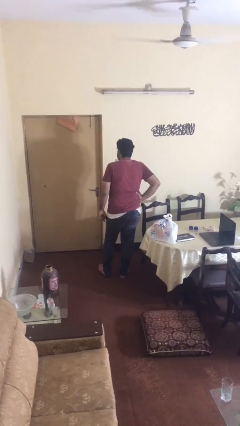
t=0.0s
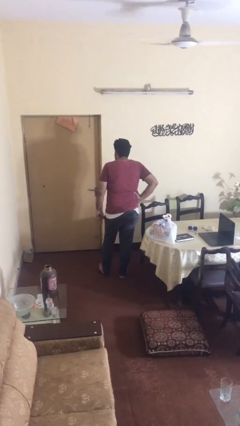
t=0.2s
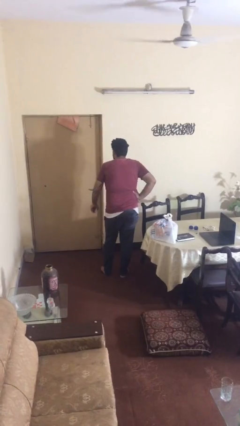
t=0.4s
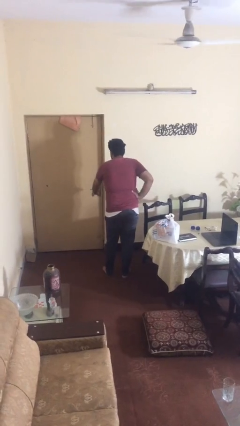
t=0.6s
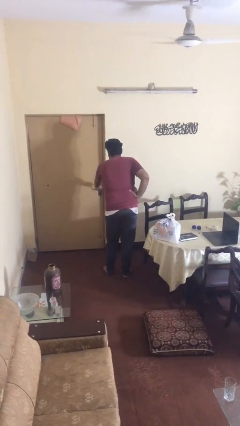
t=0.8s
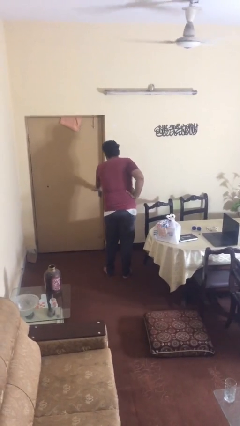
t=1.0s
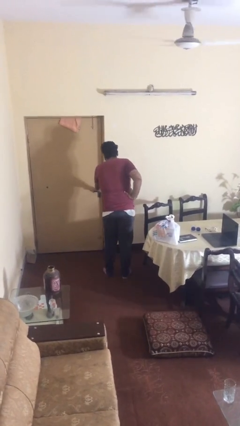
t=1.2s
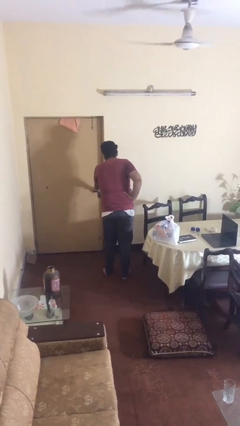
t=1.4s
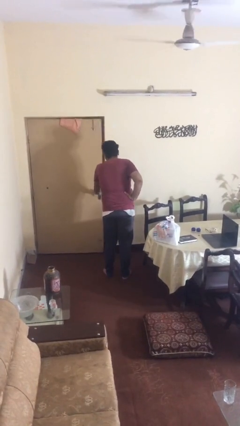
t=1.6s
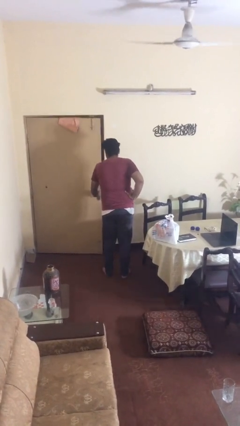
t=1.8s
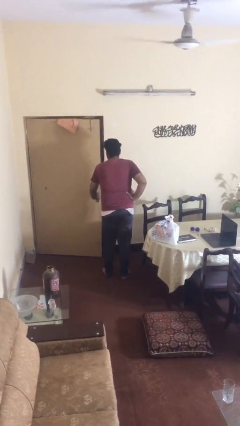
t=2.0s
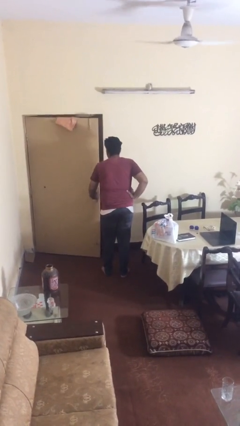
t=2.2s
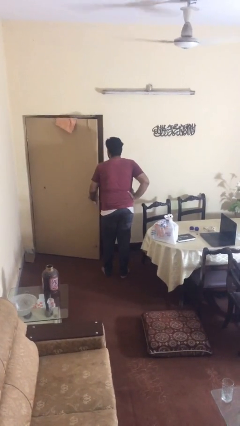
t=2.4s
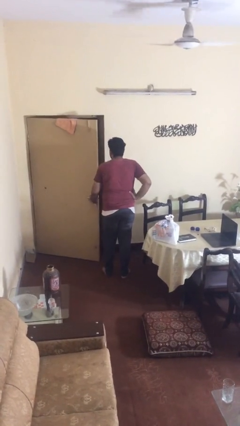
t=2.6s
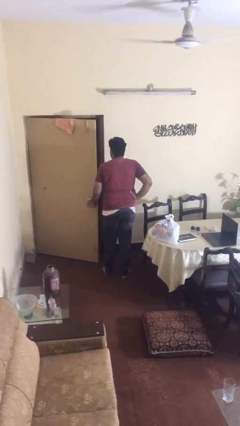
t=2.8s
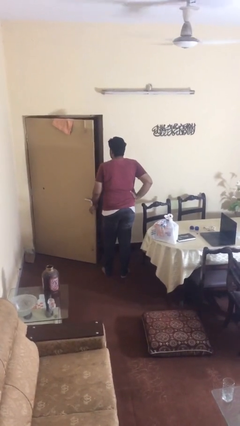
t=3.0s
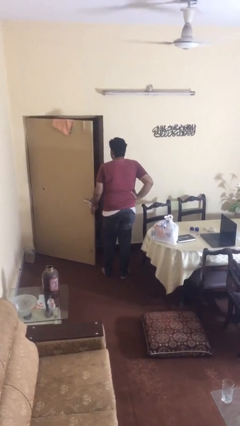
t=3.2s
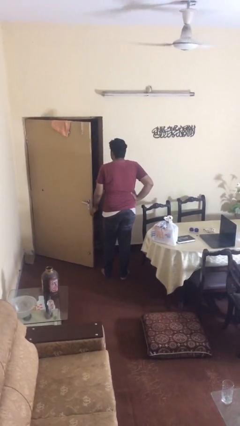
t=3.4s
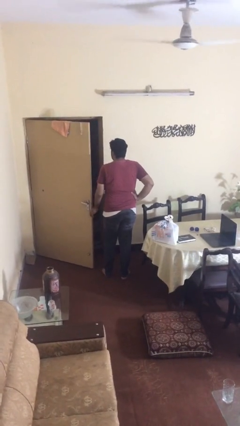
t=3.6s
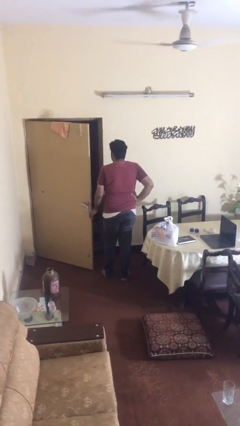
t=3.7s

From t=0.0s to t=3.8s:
person opens facility door

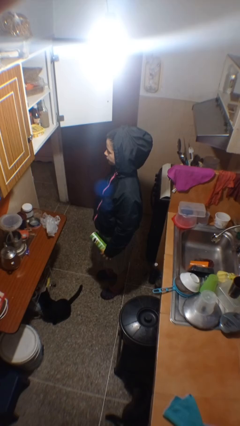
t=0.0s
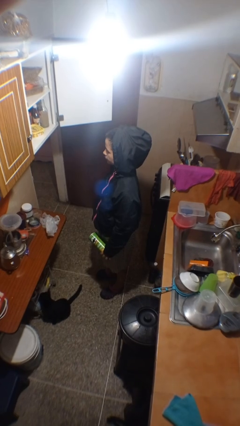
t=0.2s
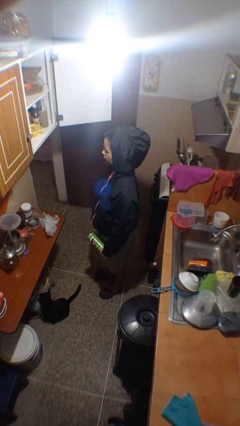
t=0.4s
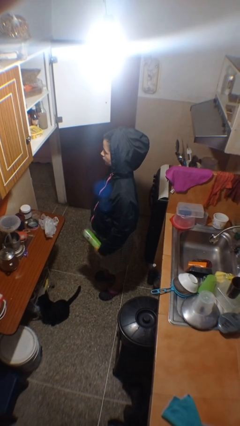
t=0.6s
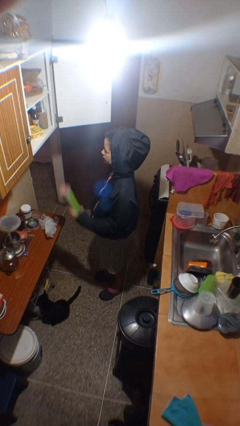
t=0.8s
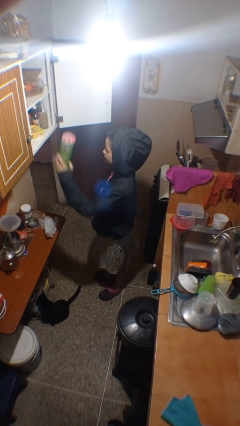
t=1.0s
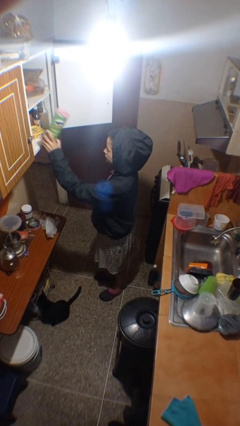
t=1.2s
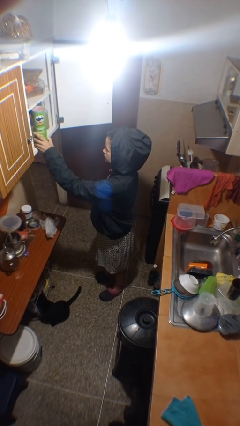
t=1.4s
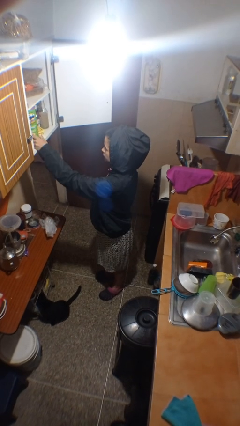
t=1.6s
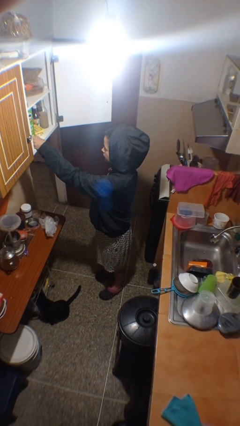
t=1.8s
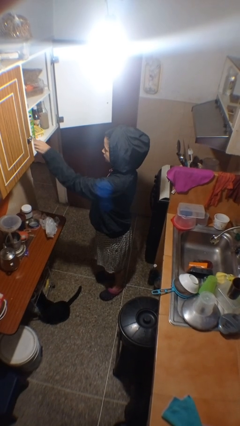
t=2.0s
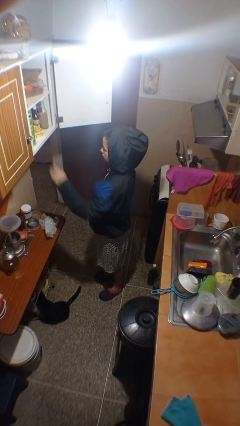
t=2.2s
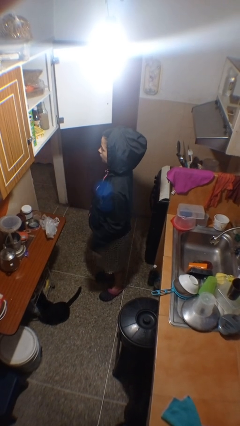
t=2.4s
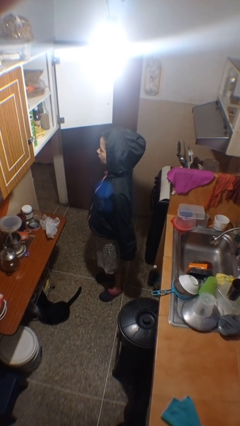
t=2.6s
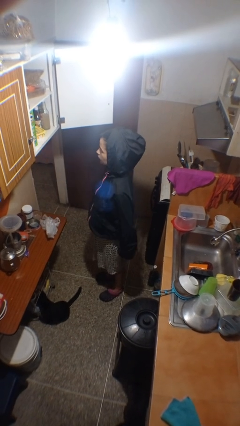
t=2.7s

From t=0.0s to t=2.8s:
person puts object in cabinet

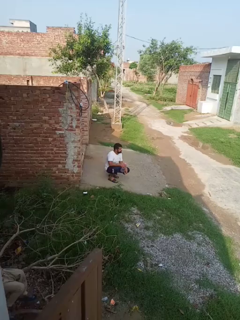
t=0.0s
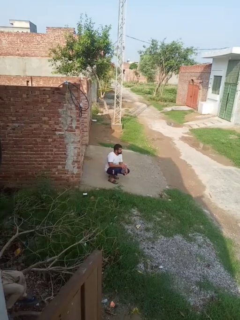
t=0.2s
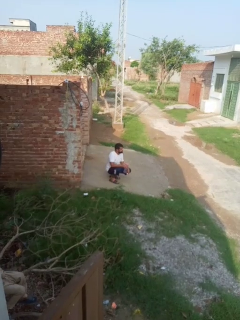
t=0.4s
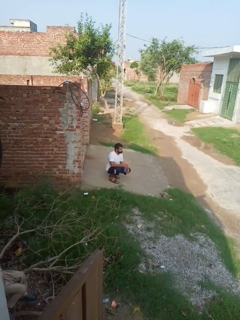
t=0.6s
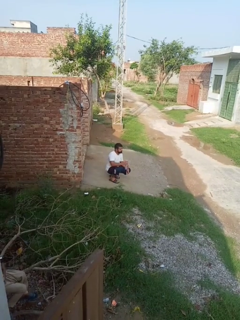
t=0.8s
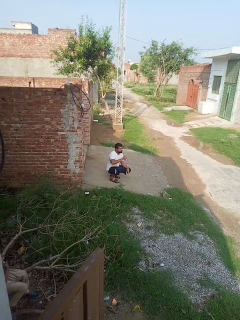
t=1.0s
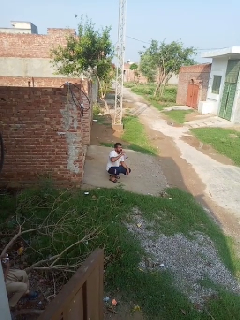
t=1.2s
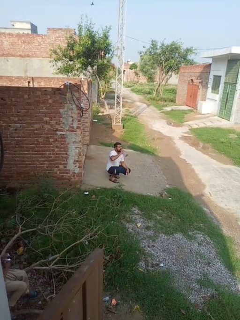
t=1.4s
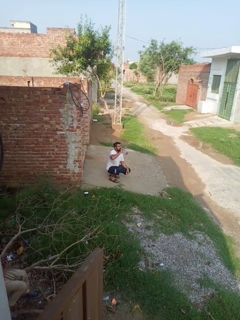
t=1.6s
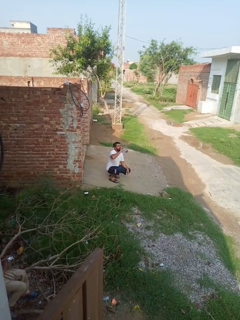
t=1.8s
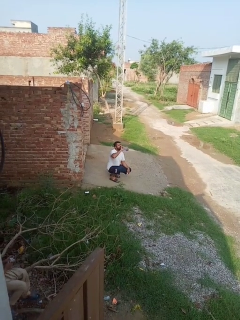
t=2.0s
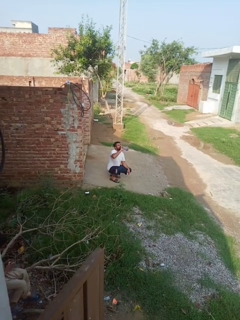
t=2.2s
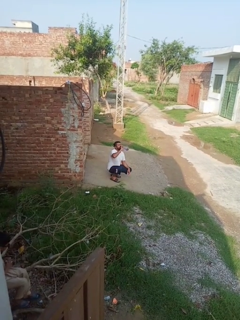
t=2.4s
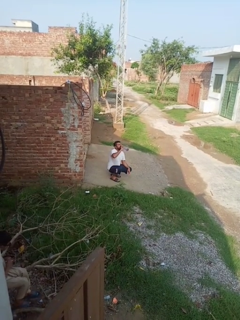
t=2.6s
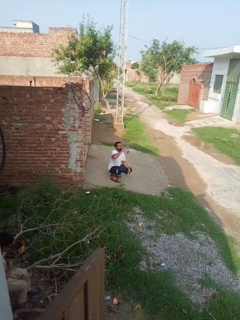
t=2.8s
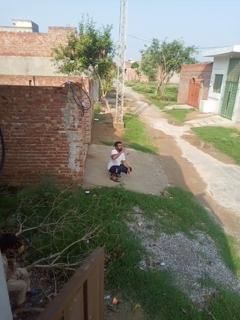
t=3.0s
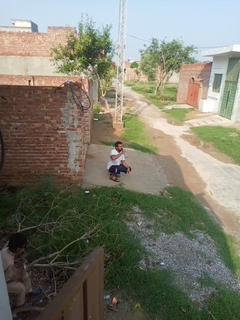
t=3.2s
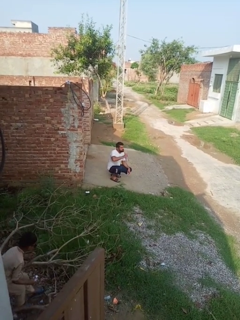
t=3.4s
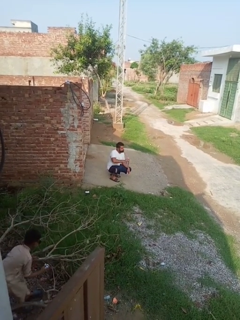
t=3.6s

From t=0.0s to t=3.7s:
person drinks from bottle

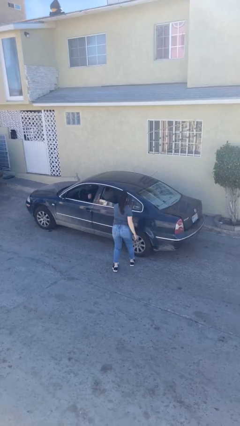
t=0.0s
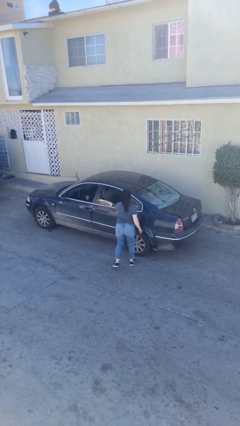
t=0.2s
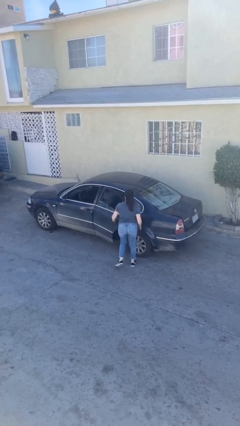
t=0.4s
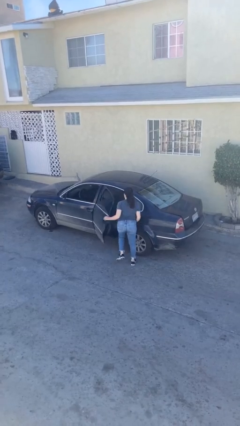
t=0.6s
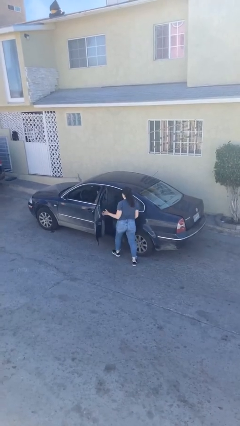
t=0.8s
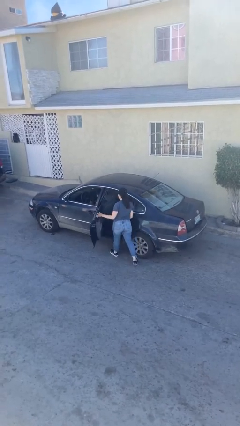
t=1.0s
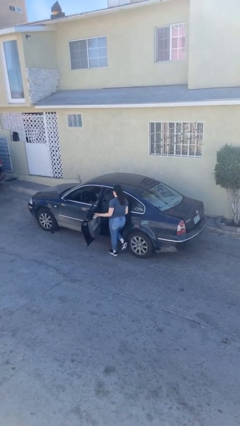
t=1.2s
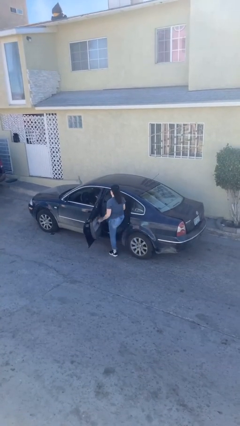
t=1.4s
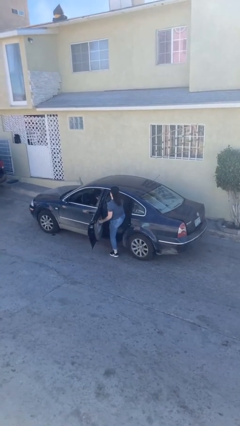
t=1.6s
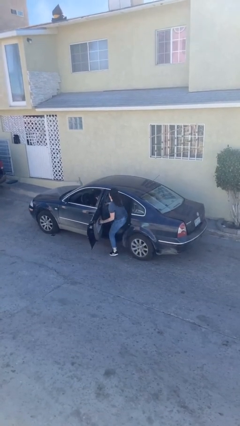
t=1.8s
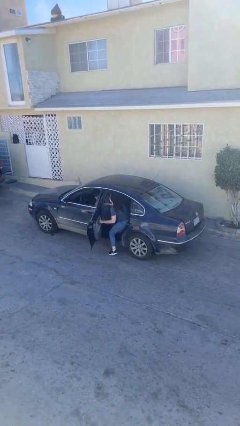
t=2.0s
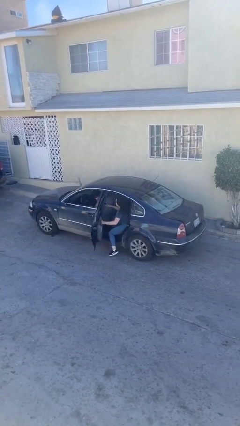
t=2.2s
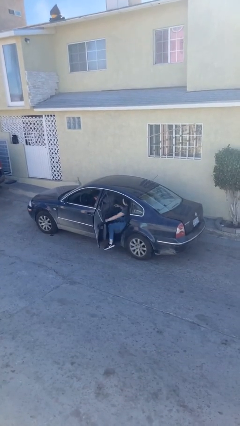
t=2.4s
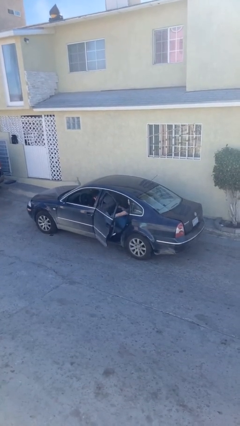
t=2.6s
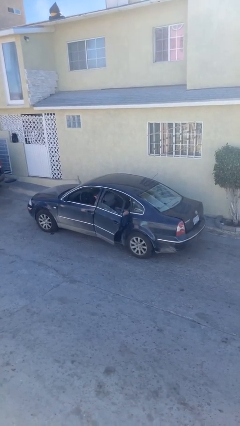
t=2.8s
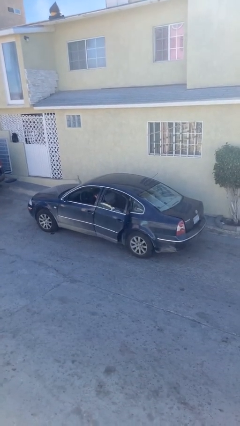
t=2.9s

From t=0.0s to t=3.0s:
car picks up person

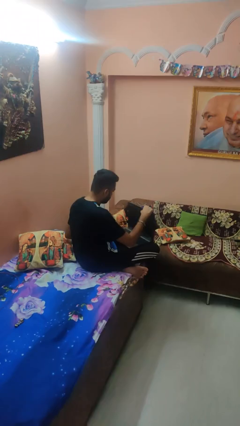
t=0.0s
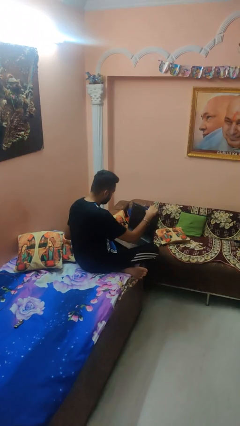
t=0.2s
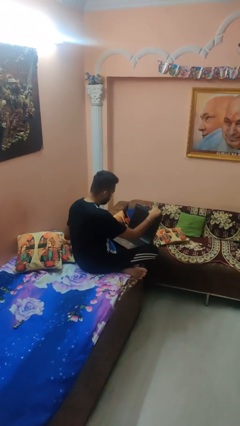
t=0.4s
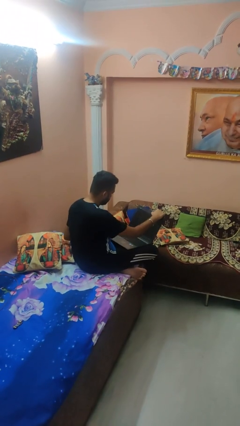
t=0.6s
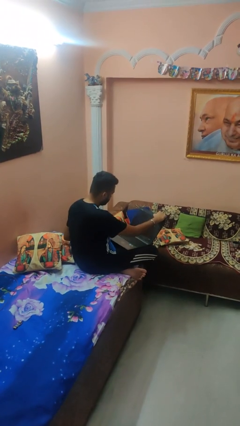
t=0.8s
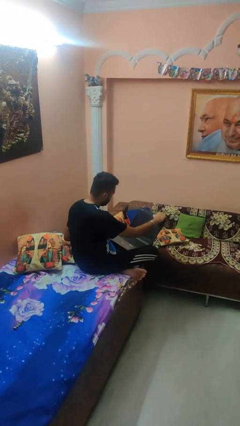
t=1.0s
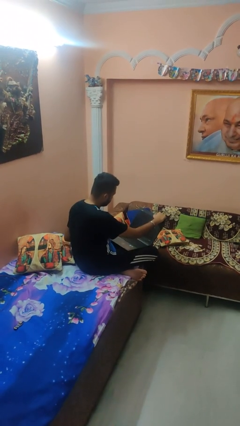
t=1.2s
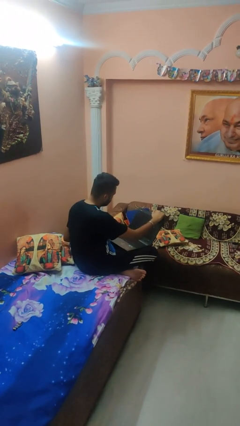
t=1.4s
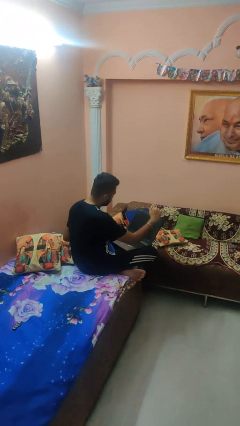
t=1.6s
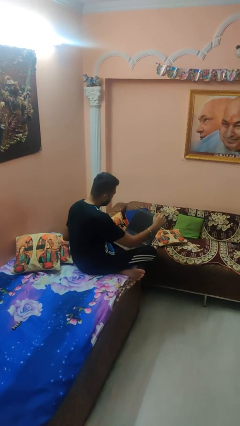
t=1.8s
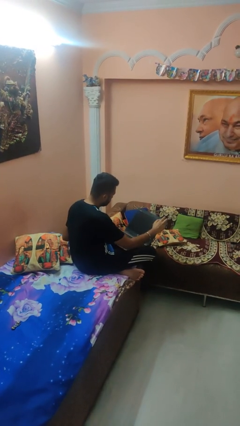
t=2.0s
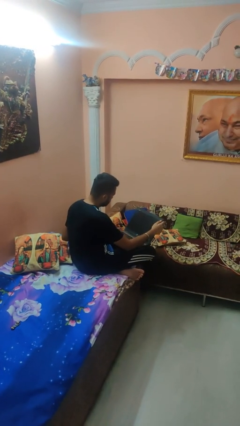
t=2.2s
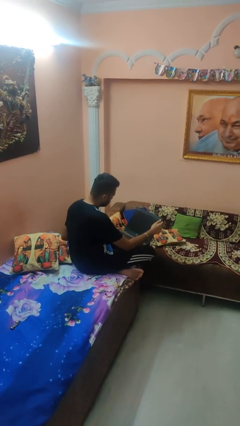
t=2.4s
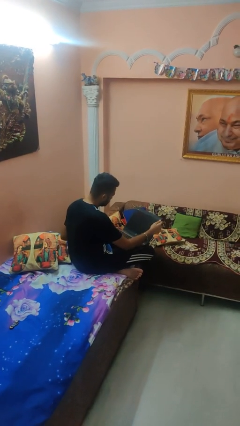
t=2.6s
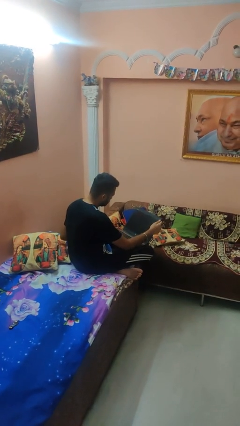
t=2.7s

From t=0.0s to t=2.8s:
person opens laptop

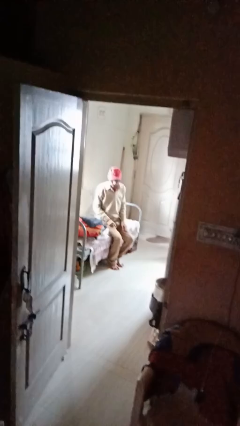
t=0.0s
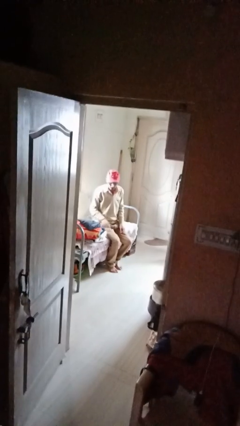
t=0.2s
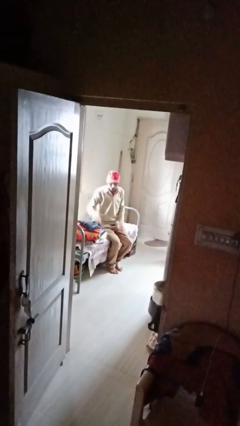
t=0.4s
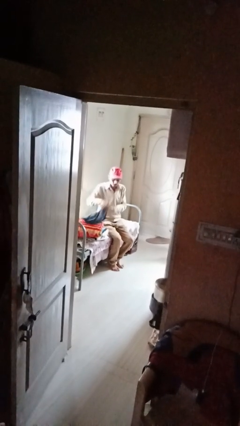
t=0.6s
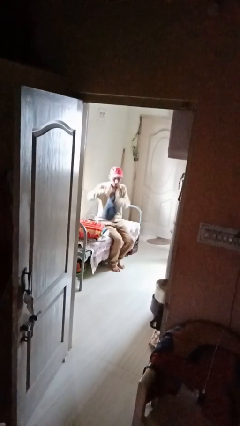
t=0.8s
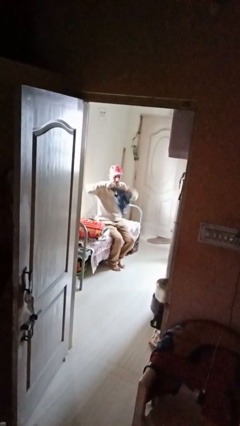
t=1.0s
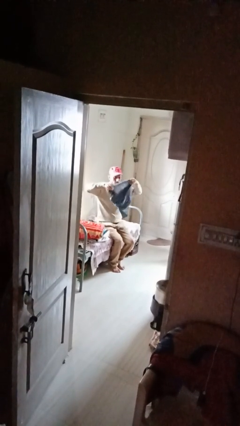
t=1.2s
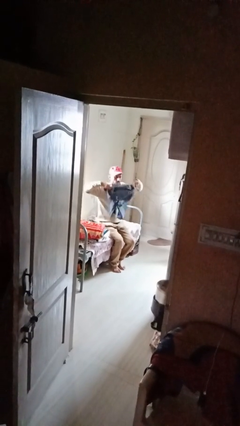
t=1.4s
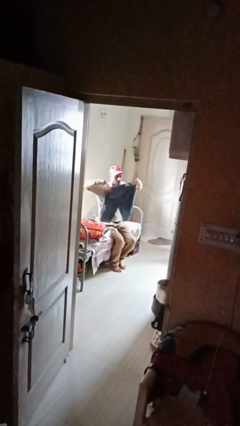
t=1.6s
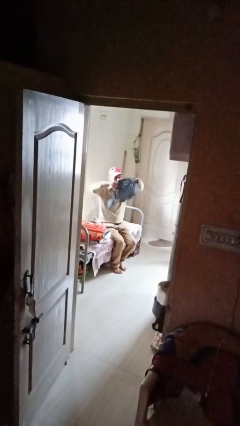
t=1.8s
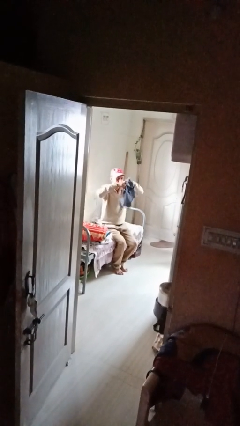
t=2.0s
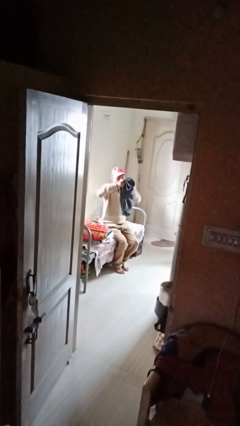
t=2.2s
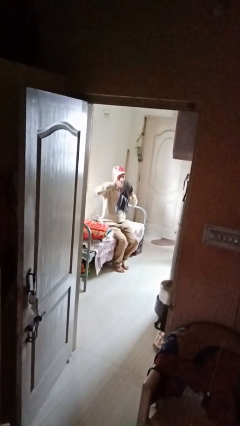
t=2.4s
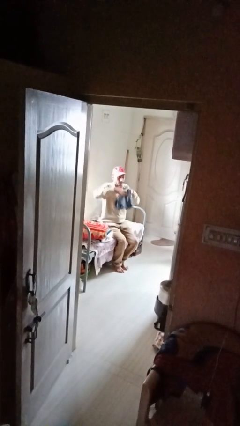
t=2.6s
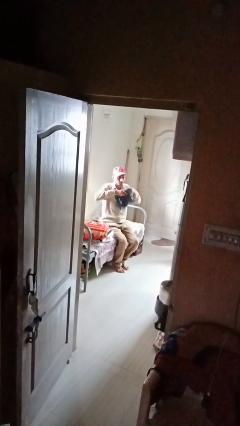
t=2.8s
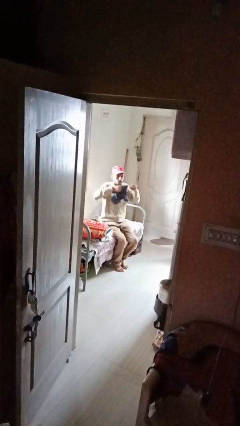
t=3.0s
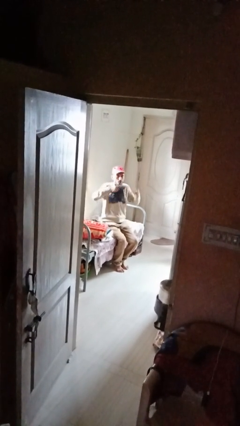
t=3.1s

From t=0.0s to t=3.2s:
person folds pants
